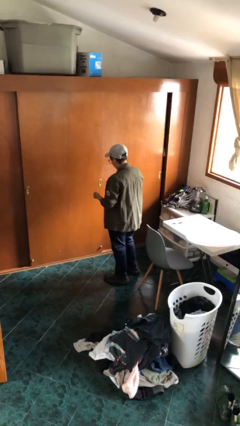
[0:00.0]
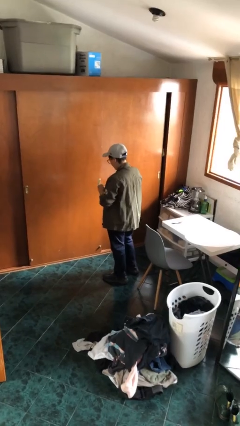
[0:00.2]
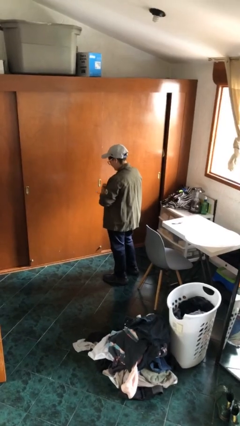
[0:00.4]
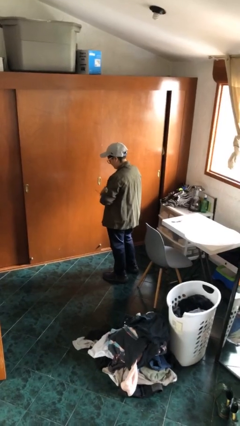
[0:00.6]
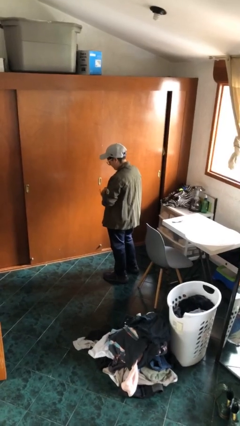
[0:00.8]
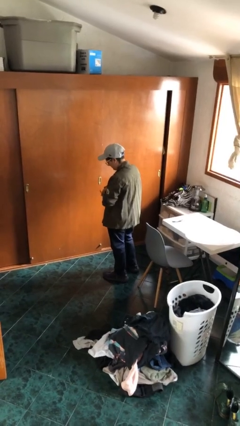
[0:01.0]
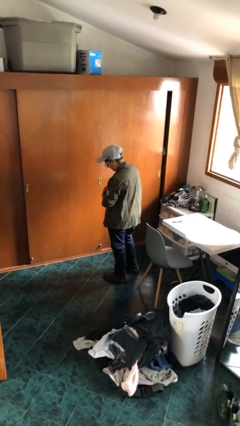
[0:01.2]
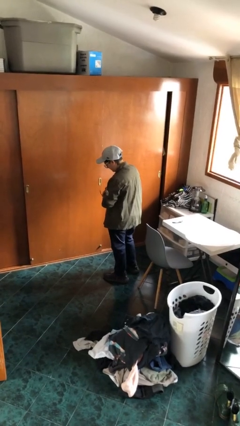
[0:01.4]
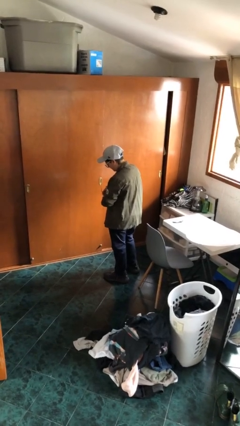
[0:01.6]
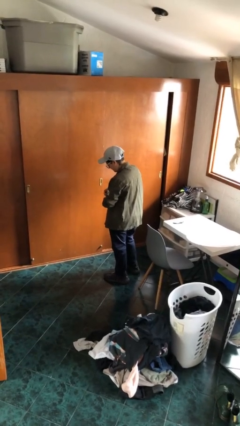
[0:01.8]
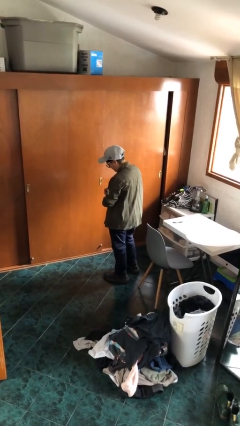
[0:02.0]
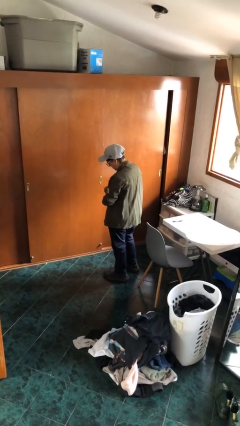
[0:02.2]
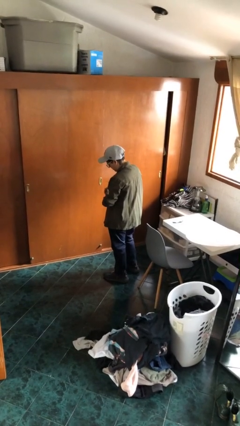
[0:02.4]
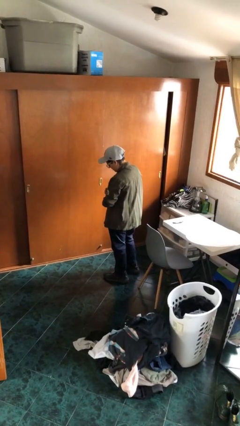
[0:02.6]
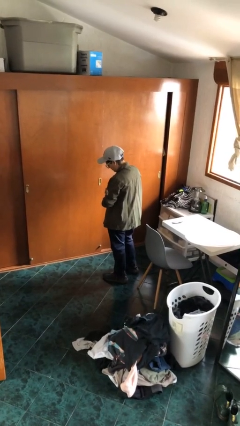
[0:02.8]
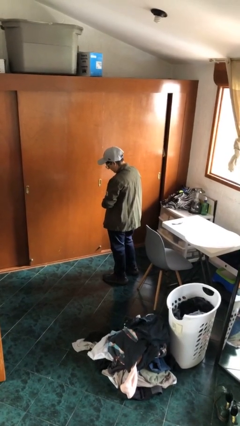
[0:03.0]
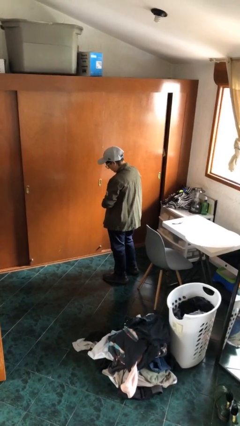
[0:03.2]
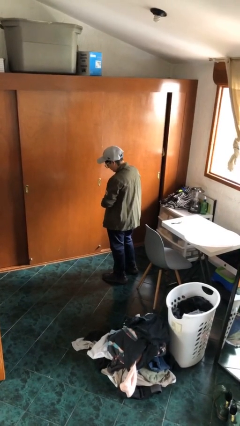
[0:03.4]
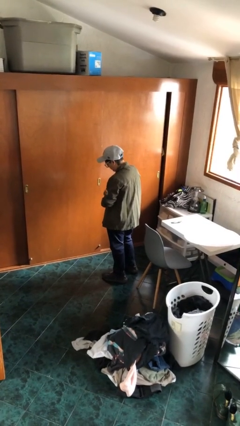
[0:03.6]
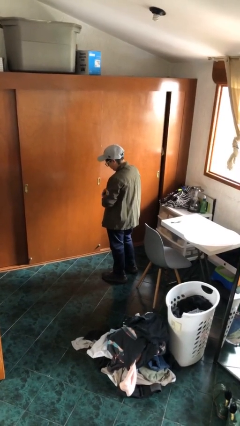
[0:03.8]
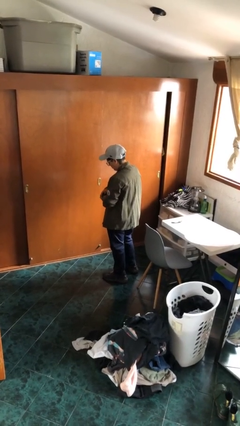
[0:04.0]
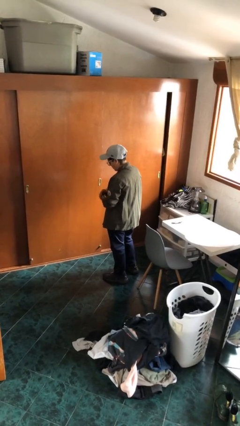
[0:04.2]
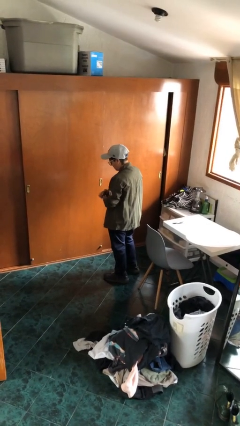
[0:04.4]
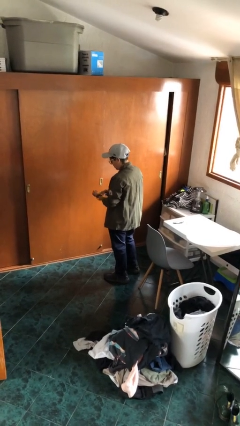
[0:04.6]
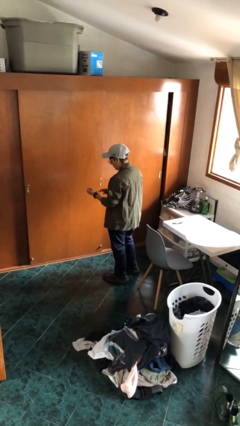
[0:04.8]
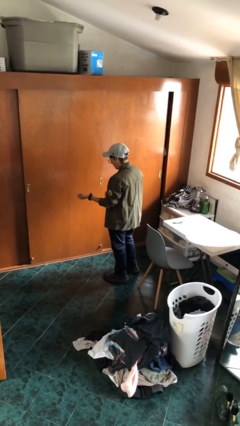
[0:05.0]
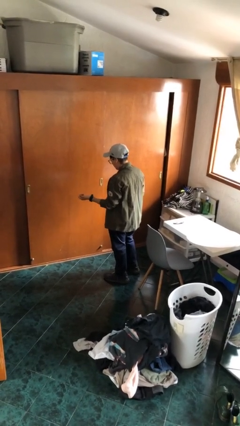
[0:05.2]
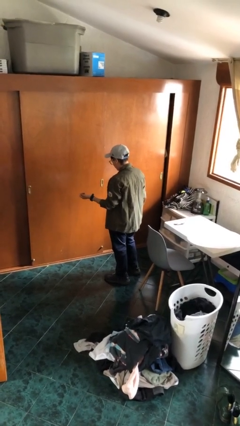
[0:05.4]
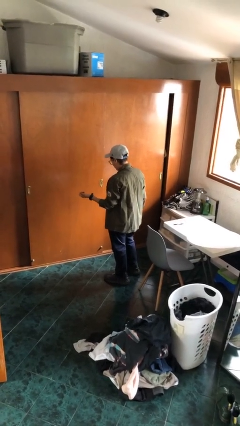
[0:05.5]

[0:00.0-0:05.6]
person puts on wristwatch

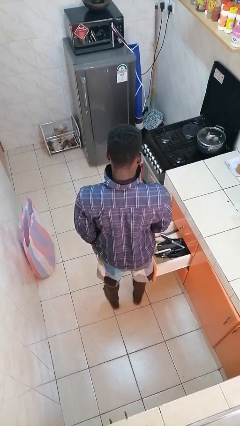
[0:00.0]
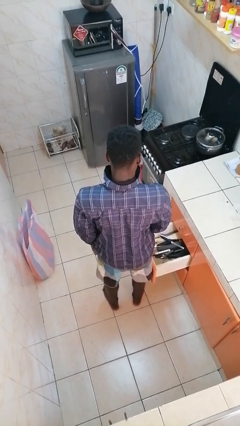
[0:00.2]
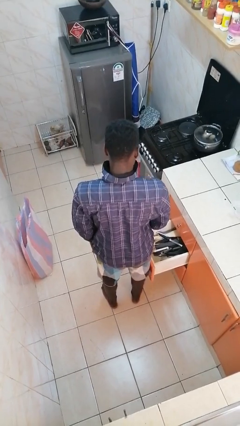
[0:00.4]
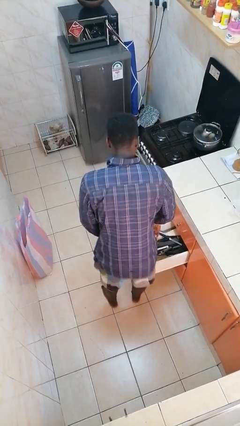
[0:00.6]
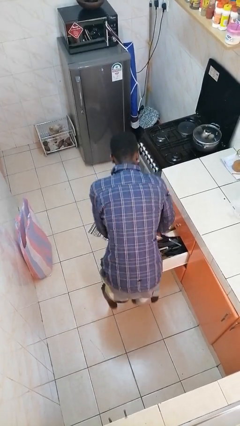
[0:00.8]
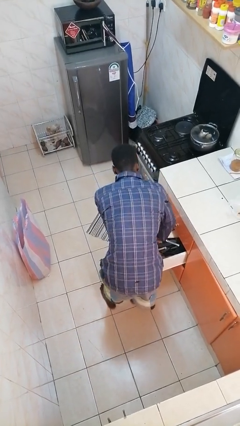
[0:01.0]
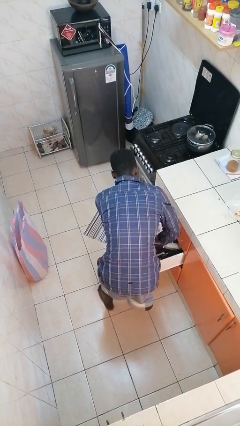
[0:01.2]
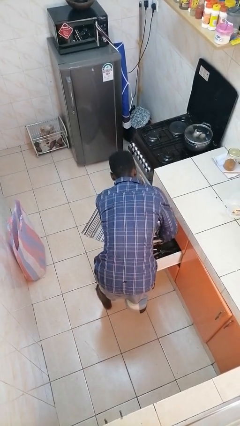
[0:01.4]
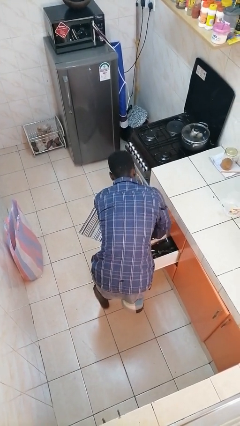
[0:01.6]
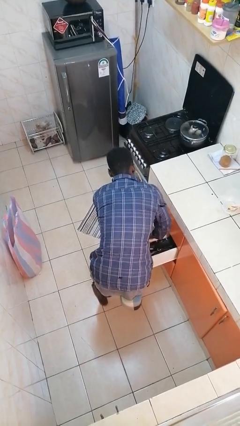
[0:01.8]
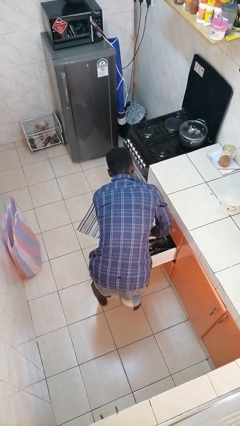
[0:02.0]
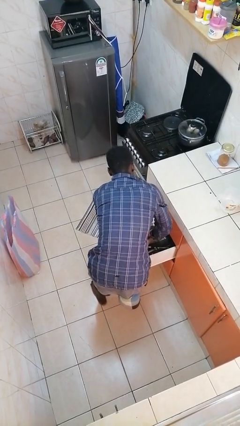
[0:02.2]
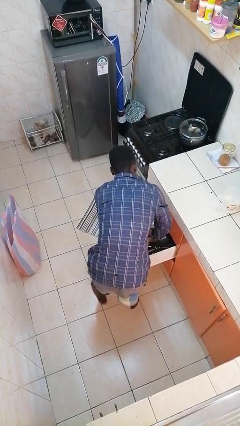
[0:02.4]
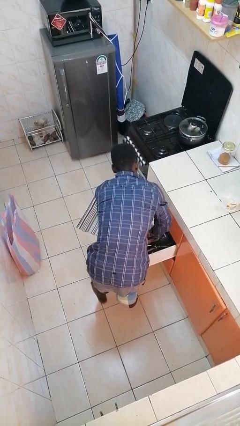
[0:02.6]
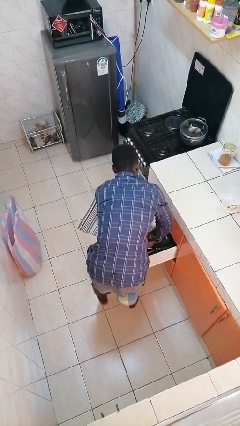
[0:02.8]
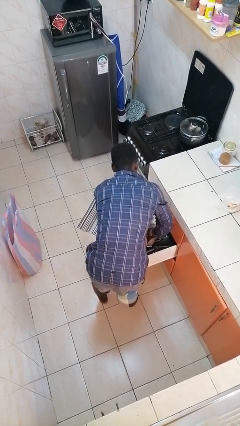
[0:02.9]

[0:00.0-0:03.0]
person searches in kitchen drawer

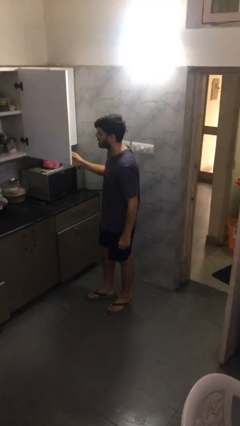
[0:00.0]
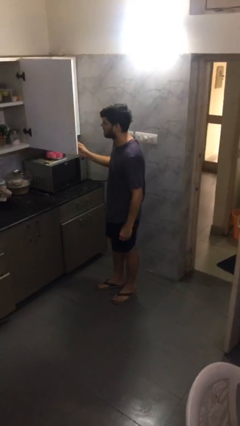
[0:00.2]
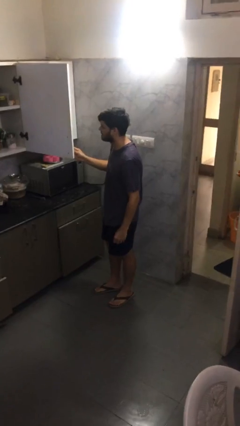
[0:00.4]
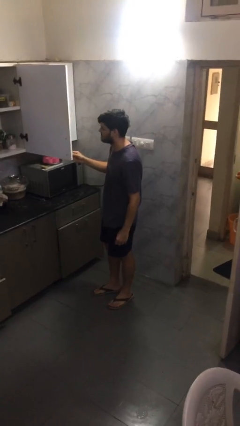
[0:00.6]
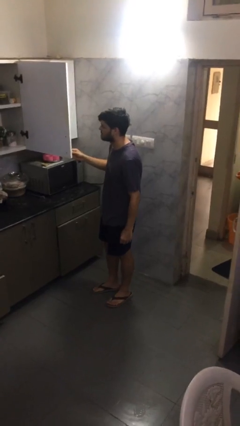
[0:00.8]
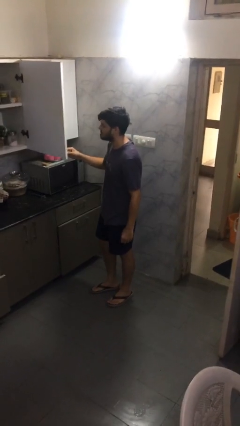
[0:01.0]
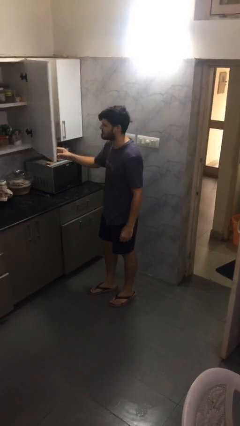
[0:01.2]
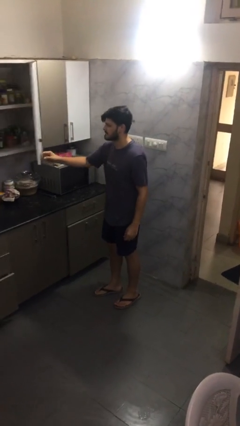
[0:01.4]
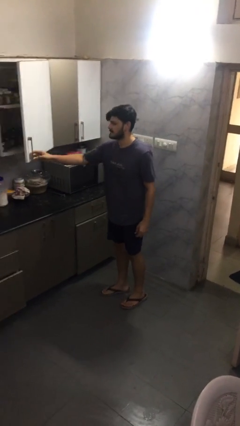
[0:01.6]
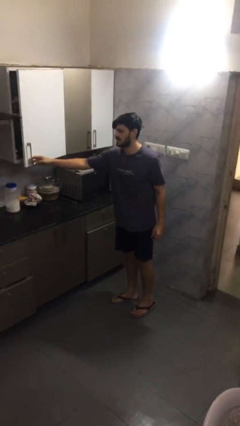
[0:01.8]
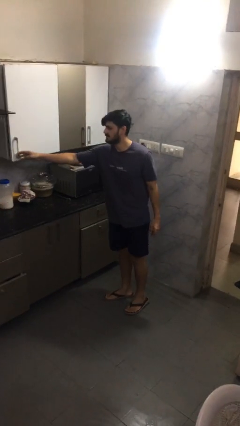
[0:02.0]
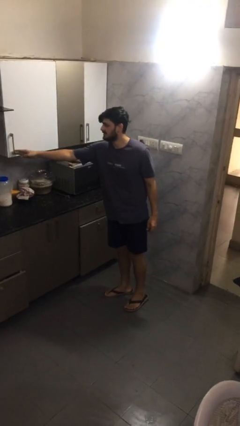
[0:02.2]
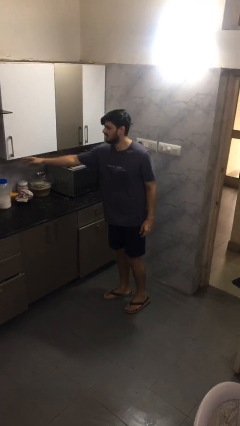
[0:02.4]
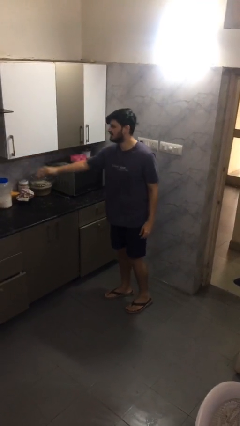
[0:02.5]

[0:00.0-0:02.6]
person closes cabinet

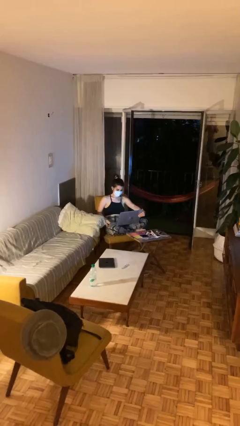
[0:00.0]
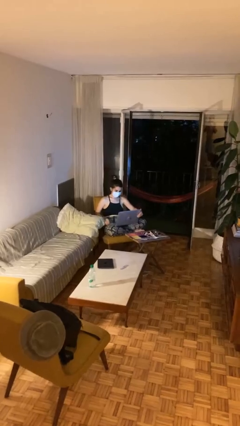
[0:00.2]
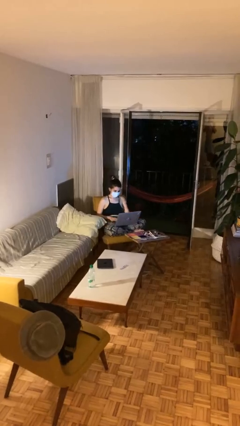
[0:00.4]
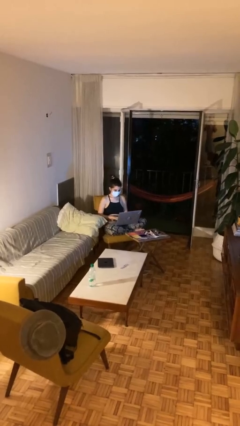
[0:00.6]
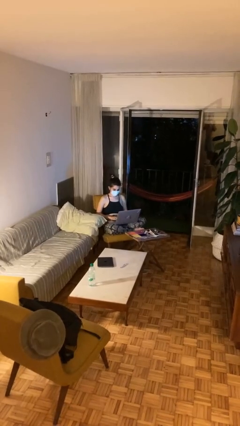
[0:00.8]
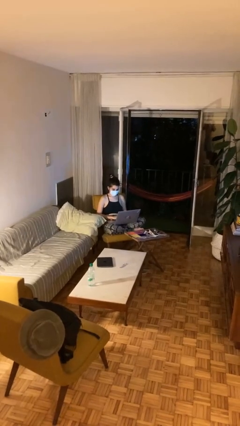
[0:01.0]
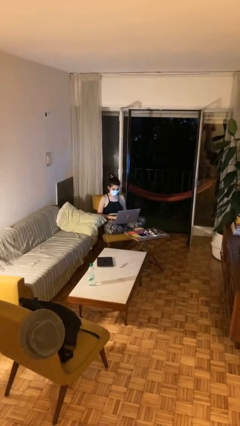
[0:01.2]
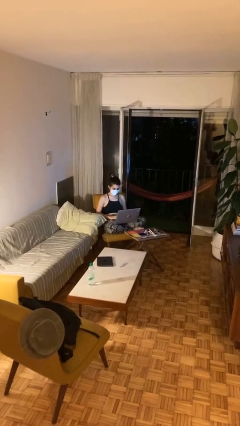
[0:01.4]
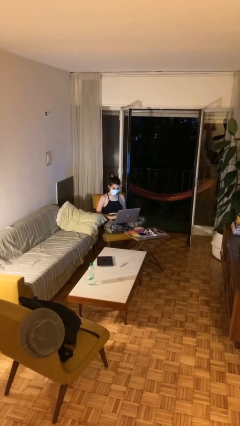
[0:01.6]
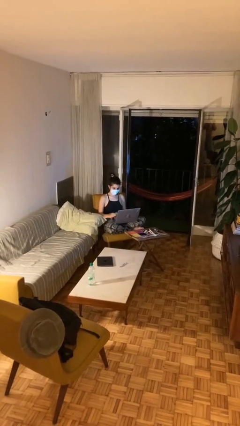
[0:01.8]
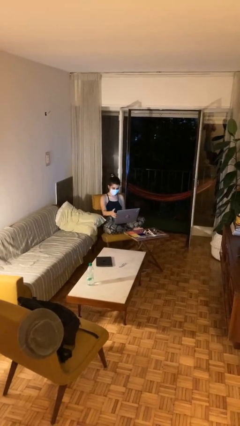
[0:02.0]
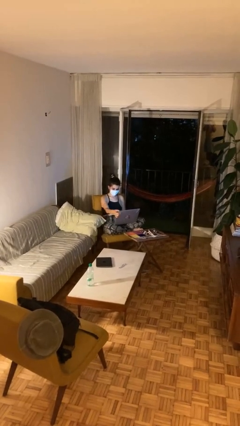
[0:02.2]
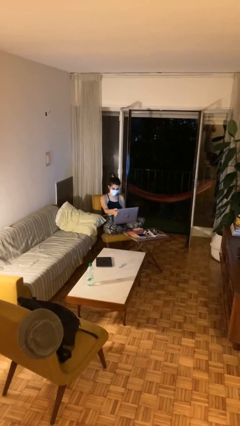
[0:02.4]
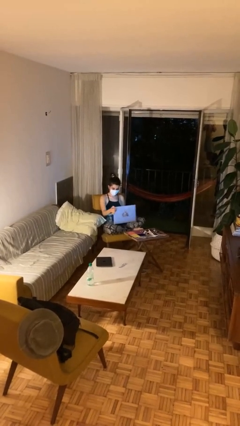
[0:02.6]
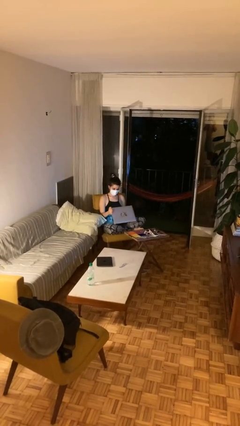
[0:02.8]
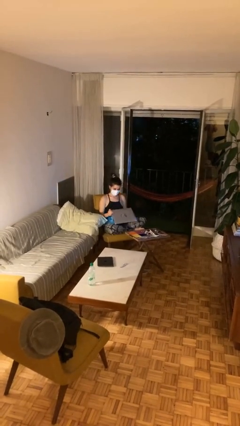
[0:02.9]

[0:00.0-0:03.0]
person interacts with laptop

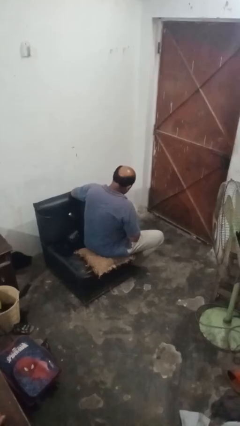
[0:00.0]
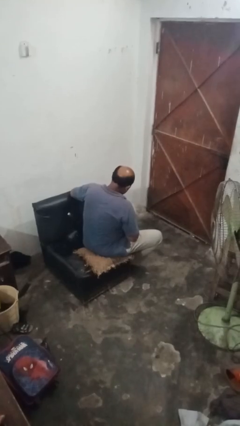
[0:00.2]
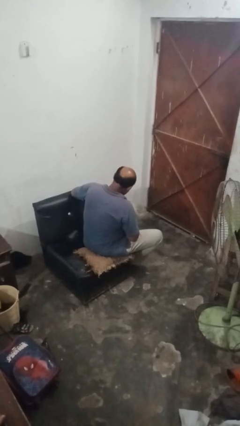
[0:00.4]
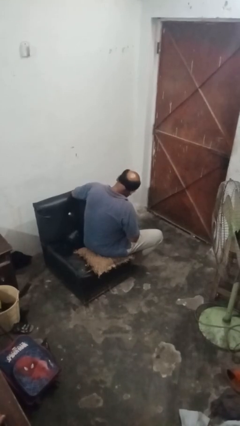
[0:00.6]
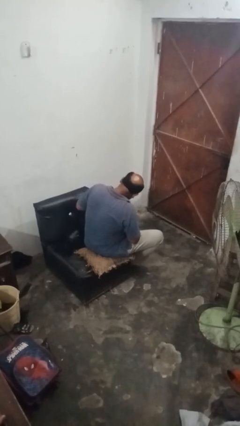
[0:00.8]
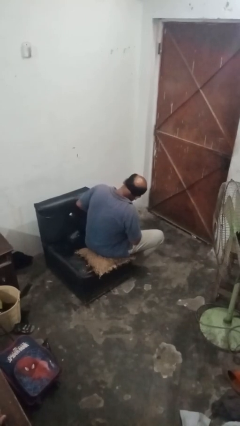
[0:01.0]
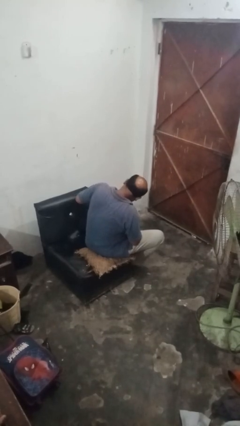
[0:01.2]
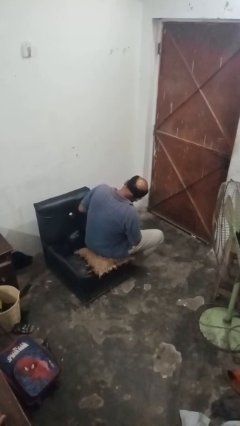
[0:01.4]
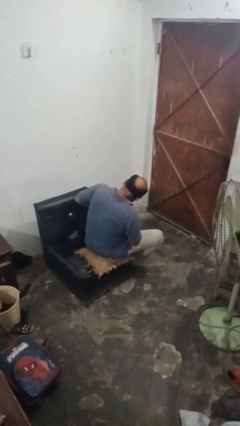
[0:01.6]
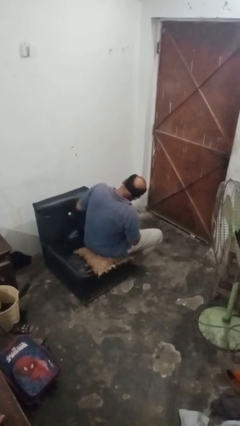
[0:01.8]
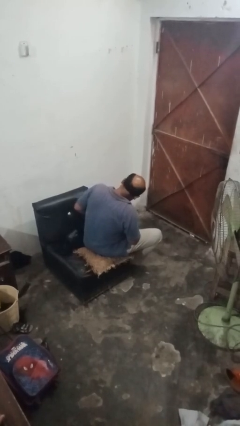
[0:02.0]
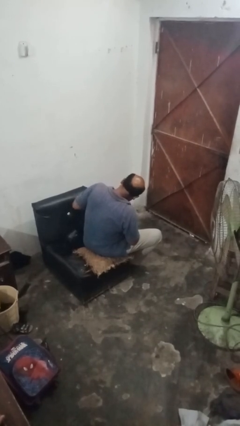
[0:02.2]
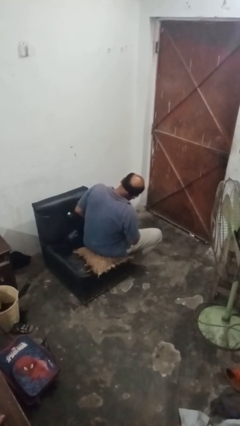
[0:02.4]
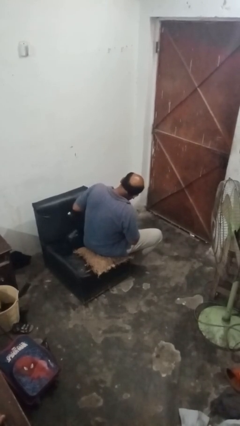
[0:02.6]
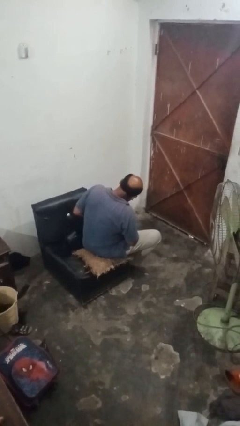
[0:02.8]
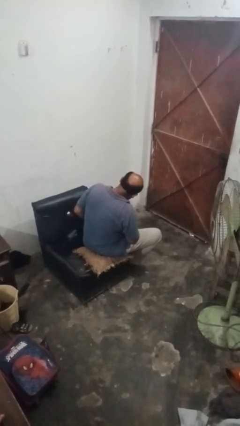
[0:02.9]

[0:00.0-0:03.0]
person slaps hands on thighs
